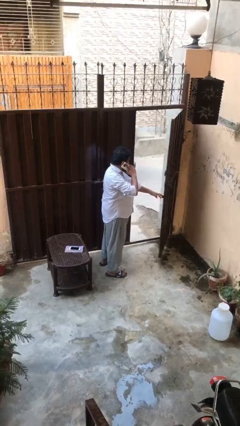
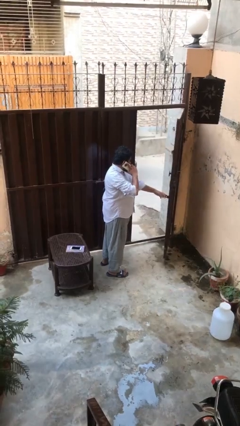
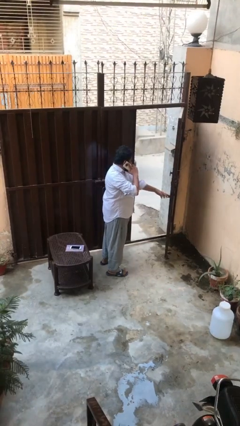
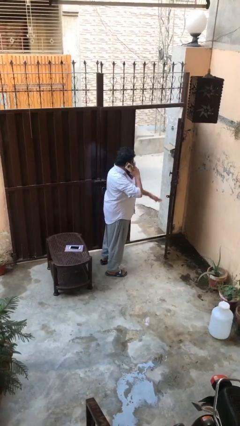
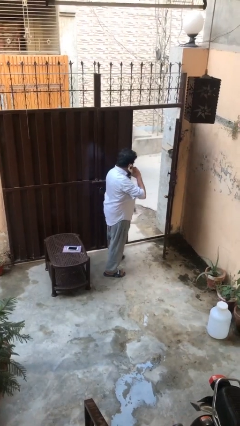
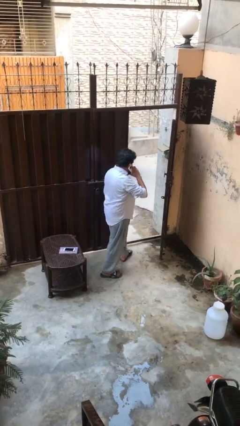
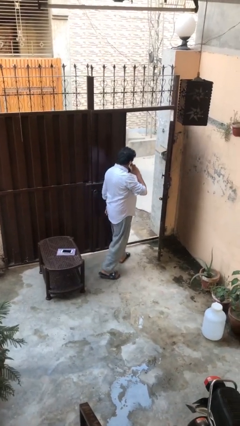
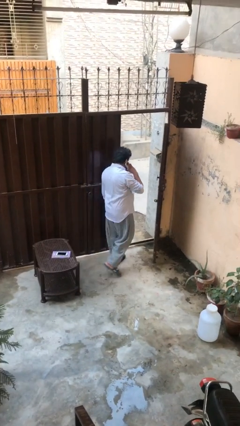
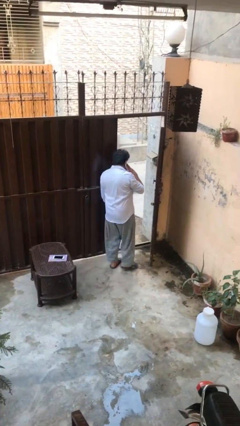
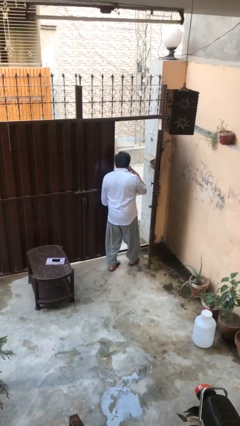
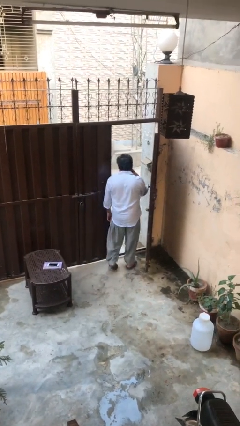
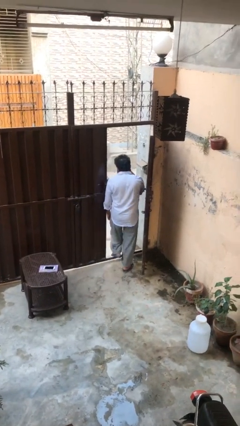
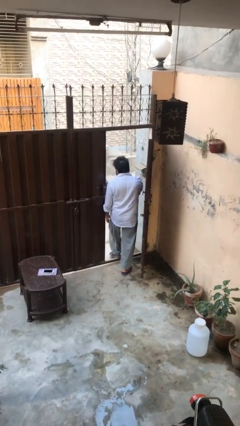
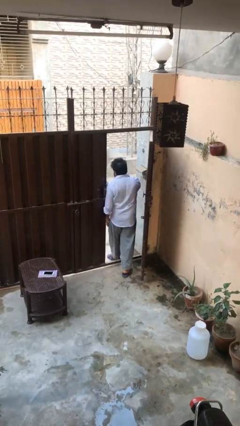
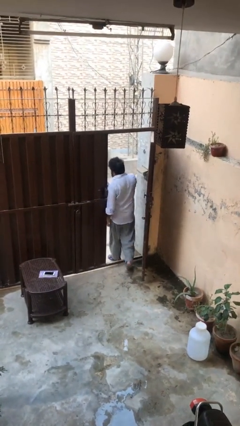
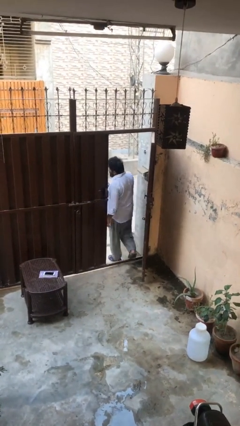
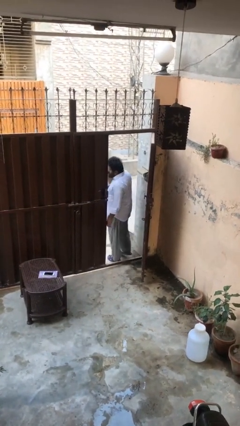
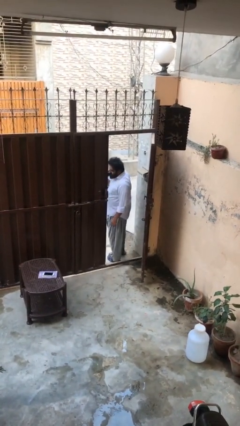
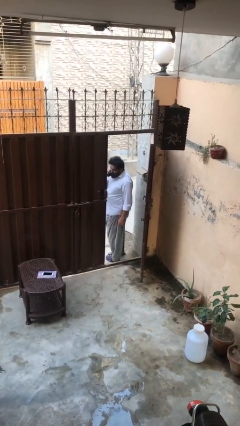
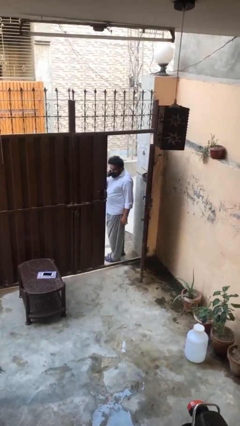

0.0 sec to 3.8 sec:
person exits scene through structure

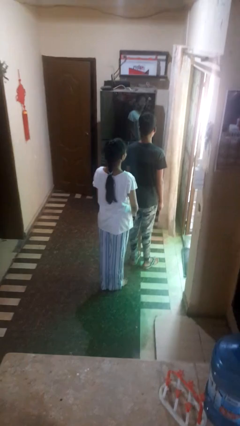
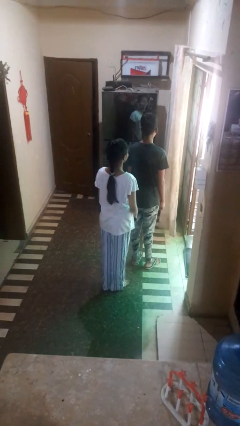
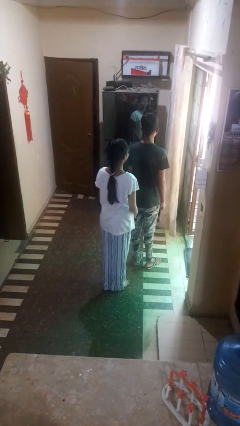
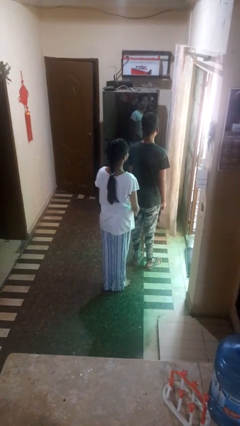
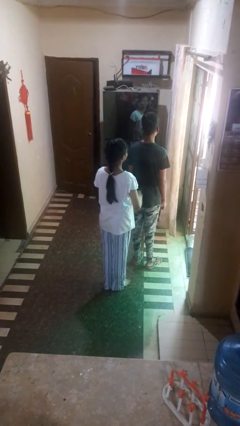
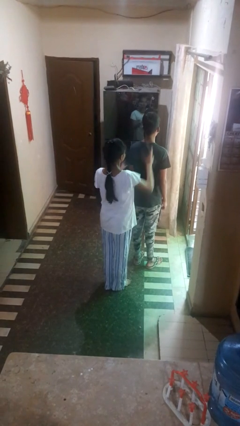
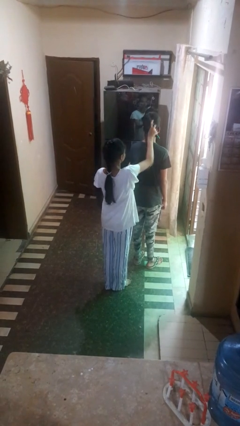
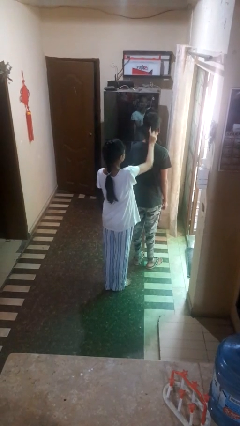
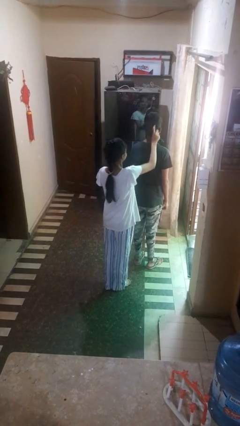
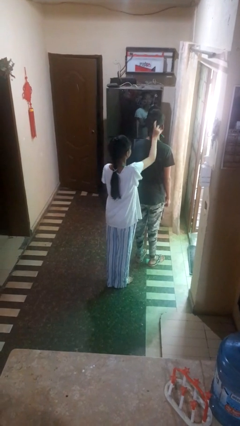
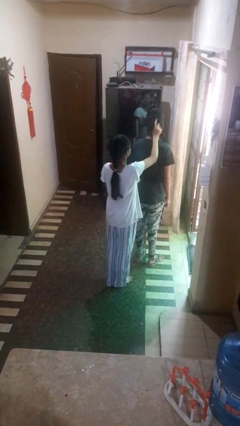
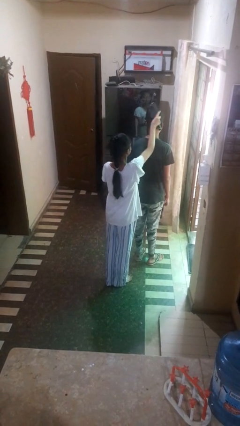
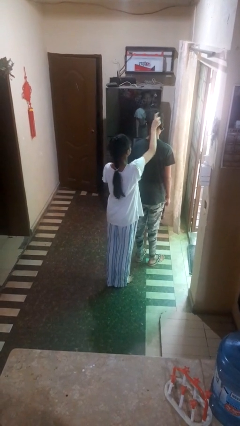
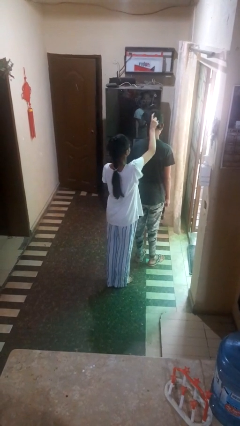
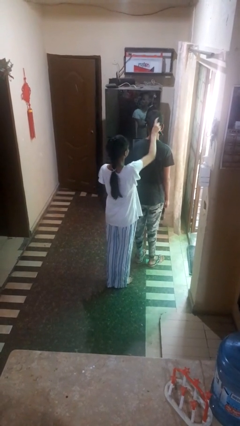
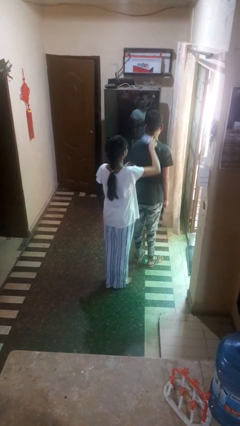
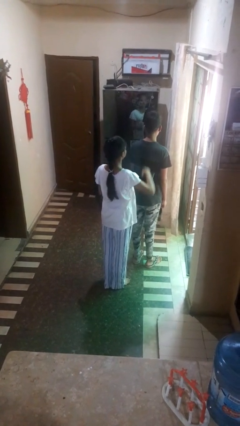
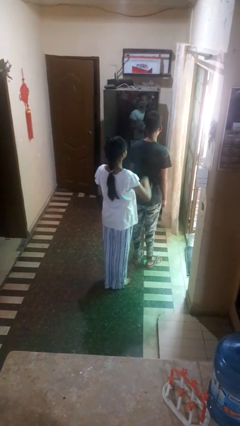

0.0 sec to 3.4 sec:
person brushes hair of person

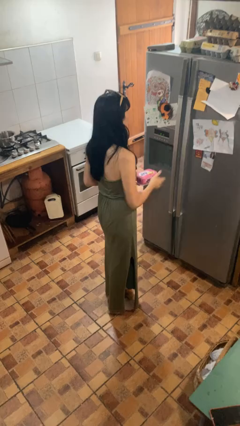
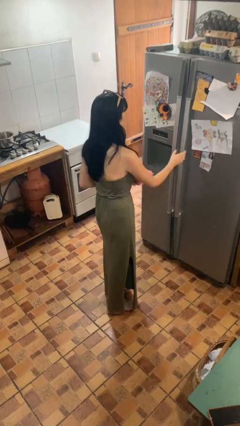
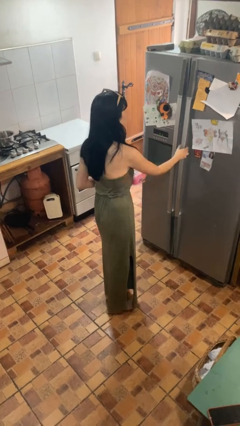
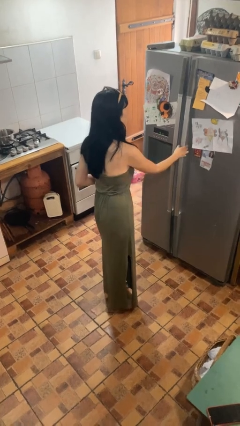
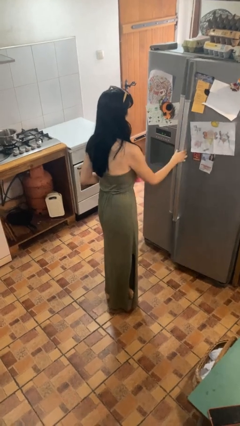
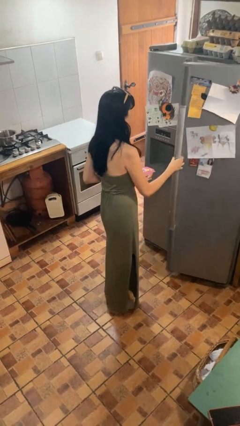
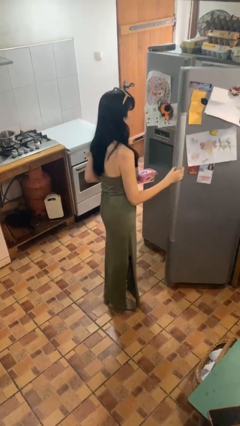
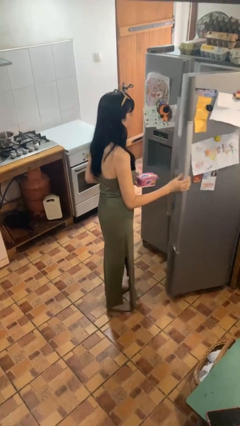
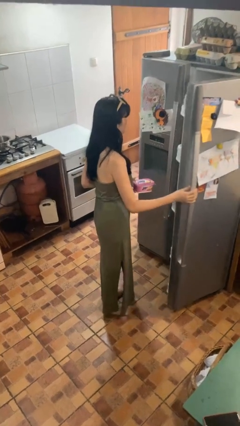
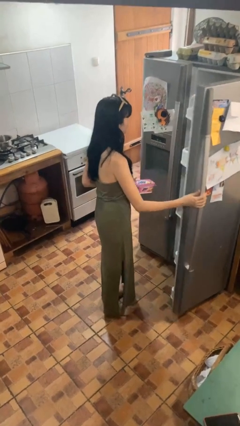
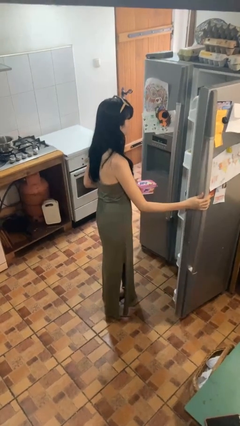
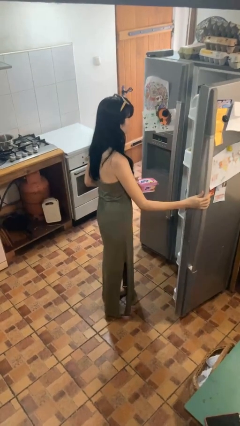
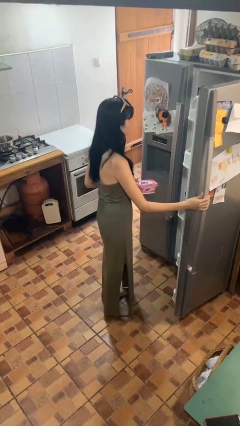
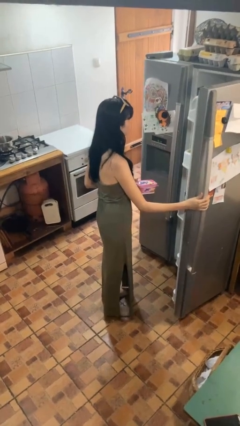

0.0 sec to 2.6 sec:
person opens refrigerator

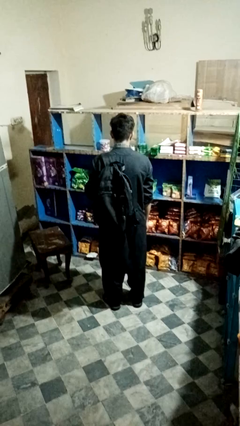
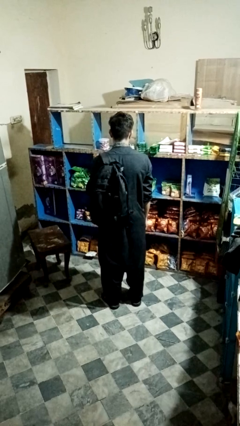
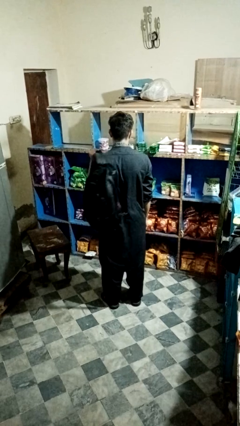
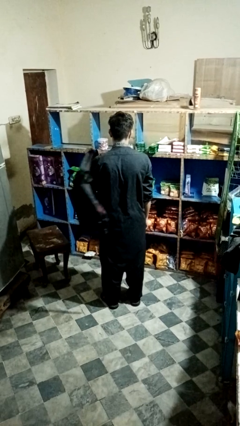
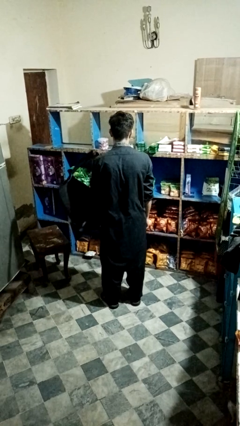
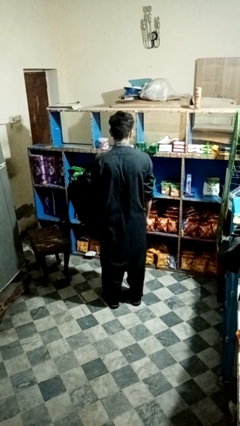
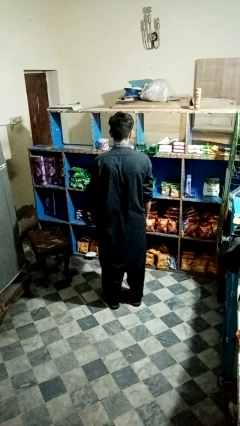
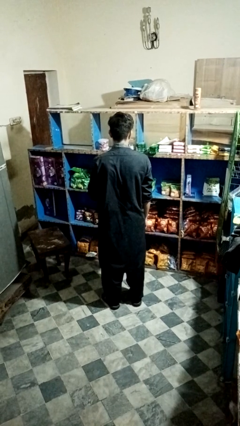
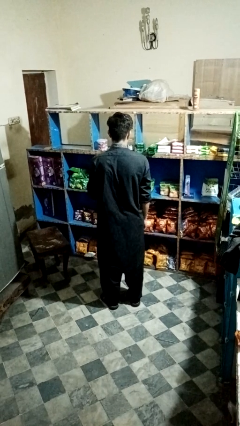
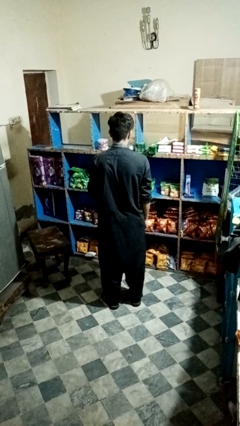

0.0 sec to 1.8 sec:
person takes off backpack

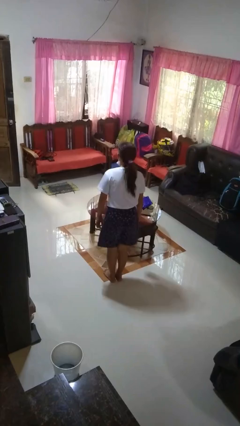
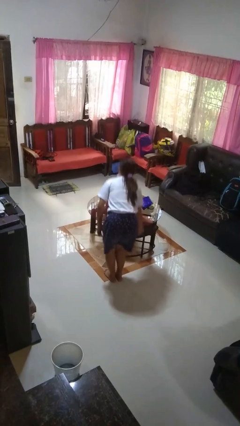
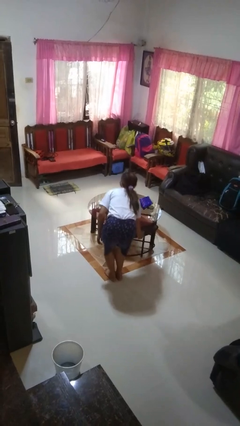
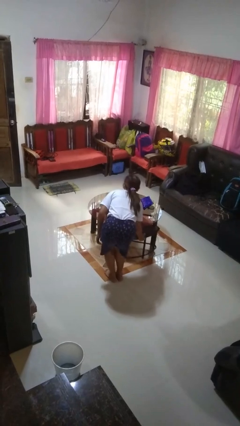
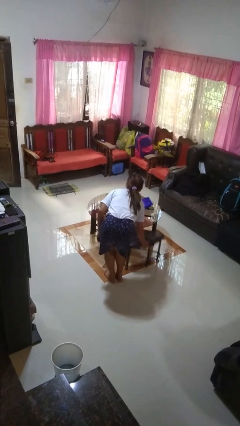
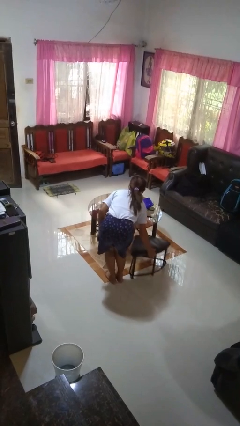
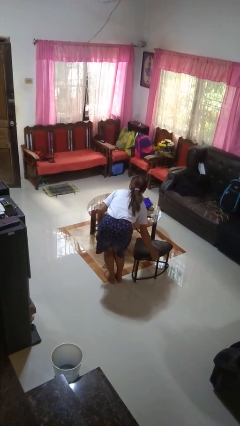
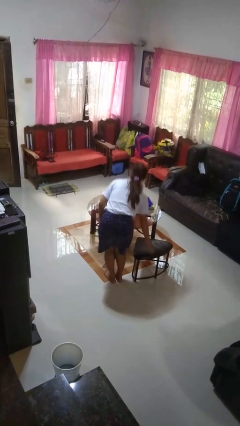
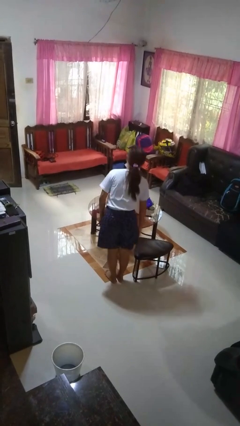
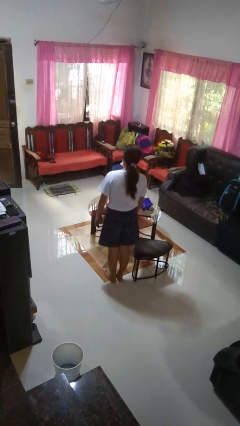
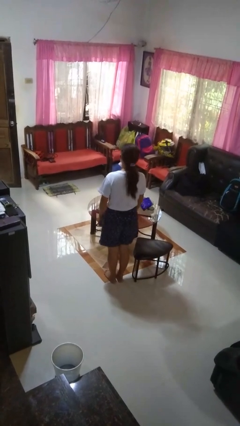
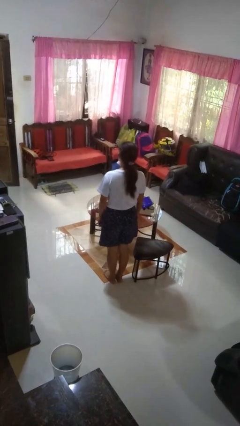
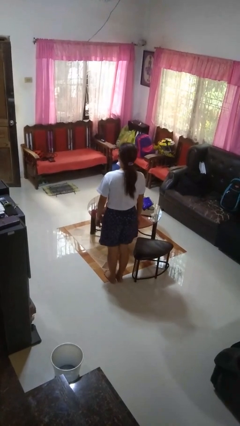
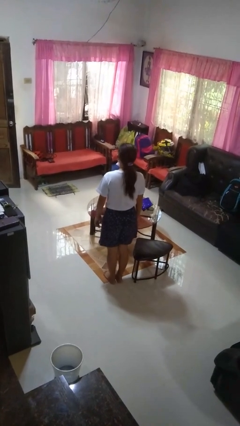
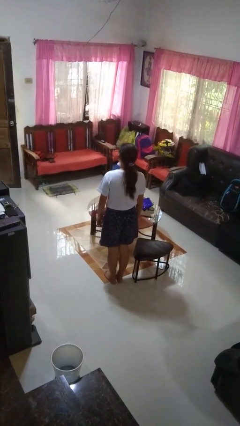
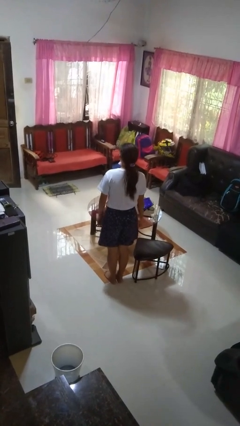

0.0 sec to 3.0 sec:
person pulls out chair

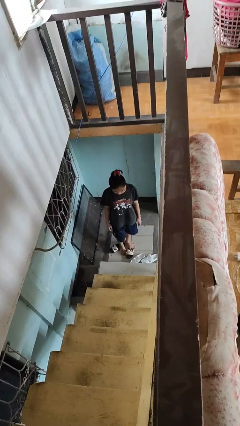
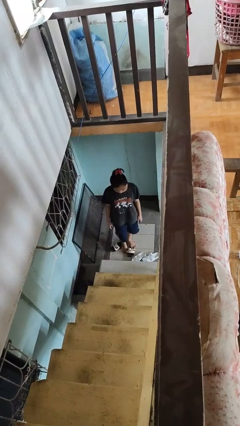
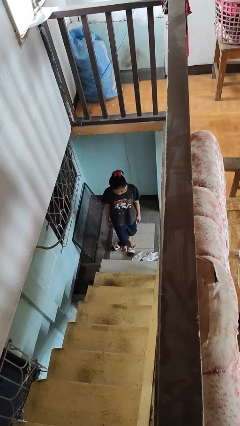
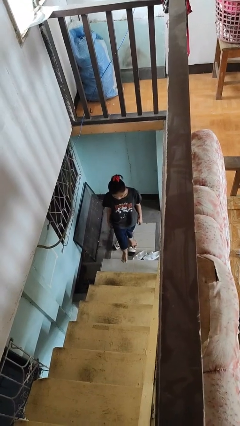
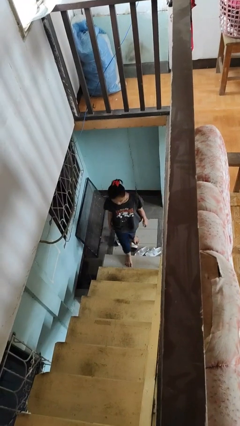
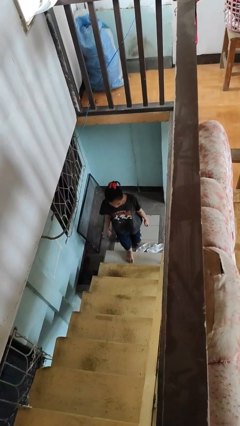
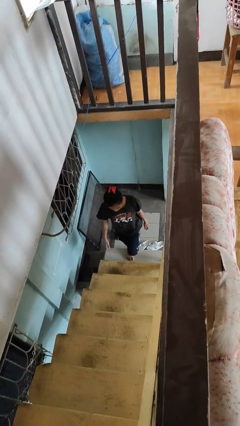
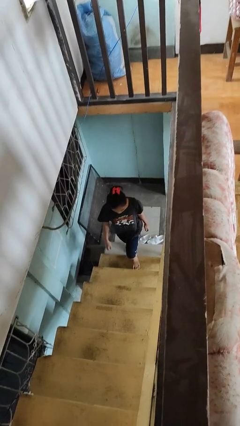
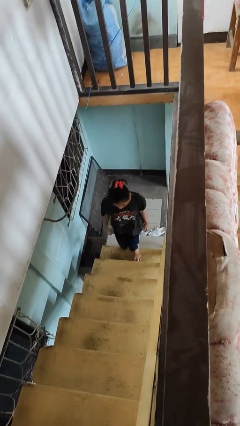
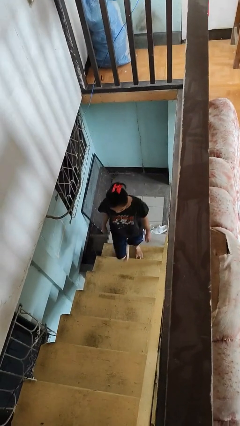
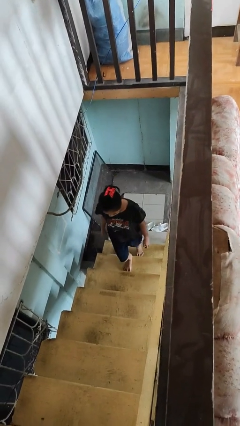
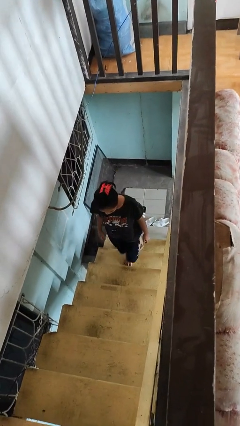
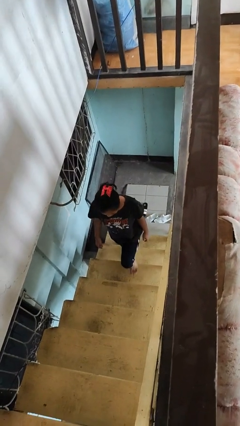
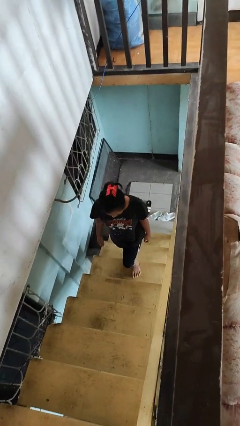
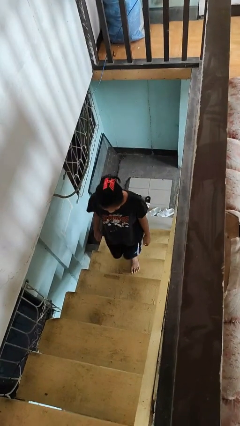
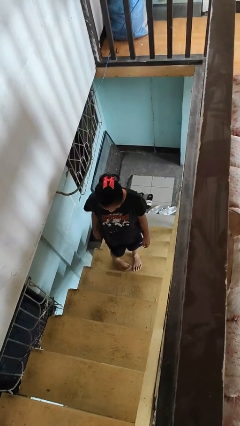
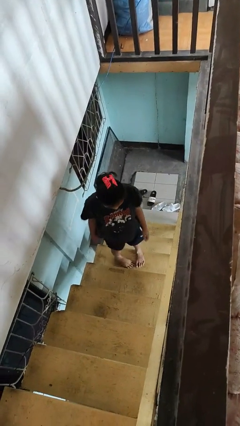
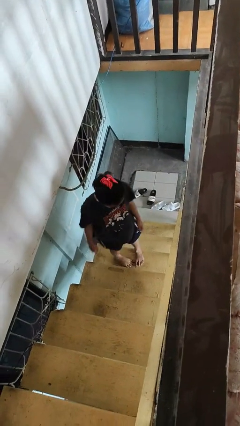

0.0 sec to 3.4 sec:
person climbs up stairs
